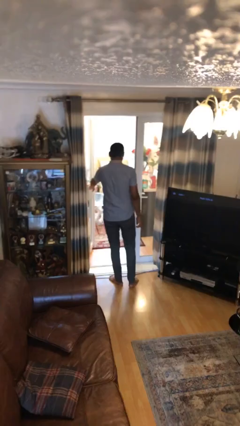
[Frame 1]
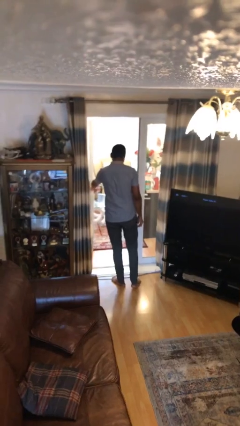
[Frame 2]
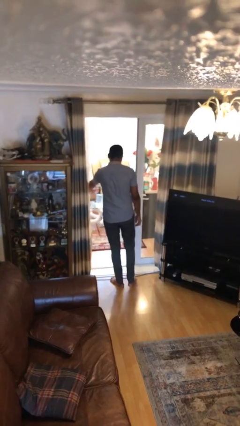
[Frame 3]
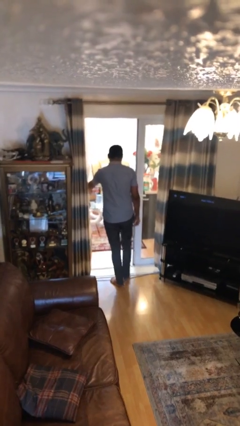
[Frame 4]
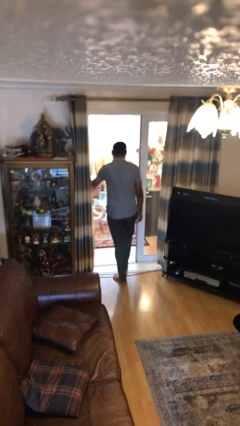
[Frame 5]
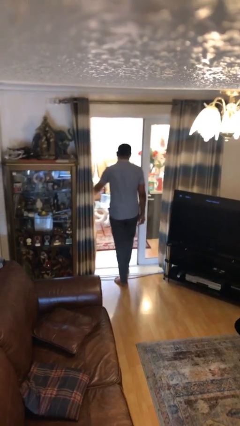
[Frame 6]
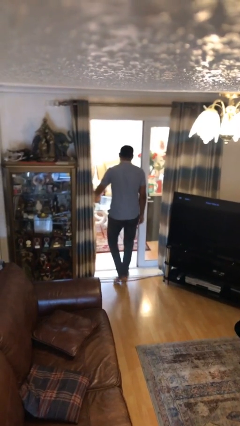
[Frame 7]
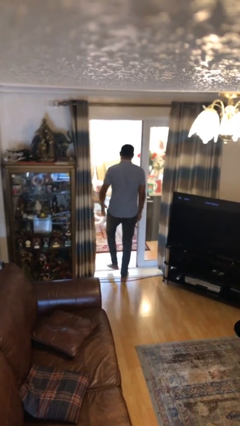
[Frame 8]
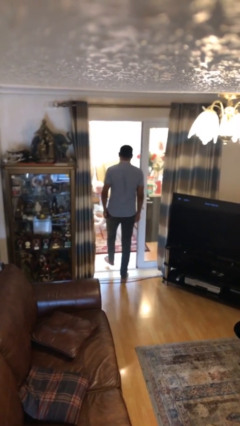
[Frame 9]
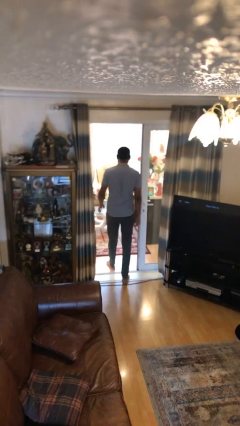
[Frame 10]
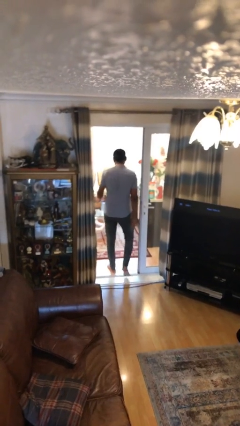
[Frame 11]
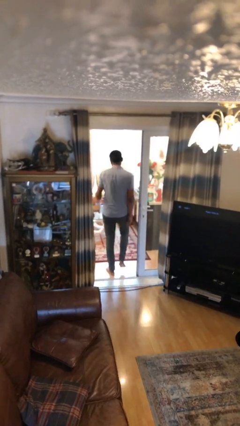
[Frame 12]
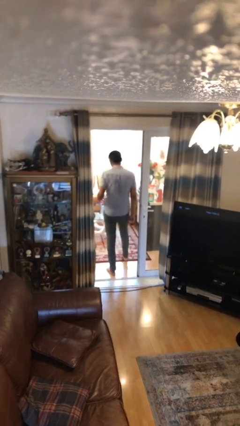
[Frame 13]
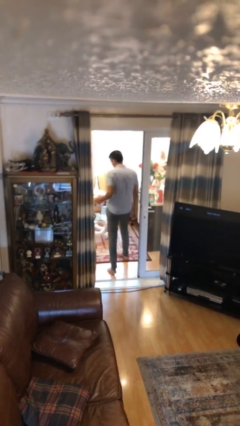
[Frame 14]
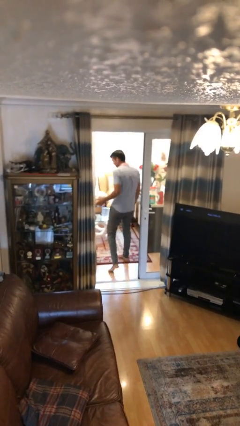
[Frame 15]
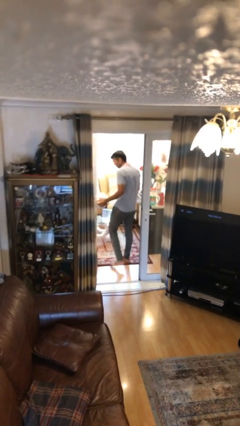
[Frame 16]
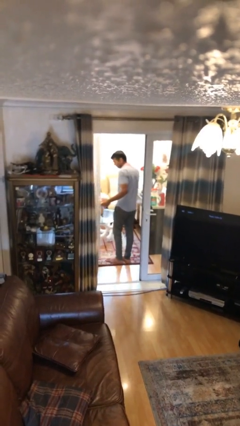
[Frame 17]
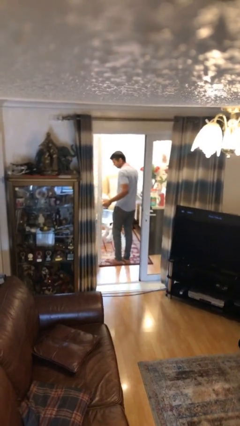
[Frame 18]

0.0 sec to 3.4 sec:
person exits scene through structure

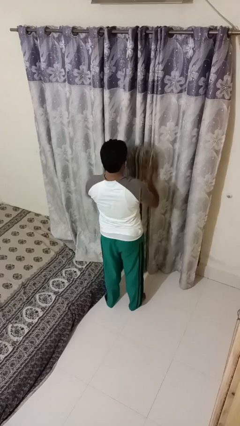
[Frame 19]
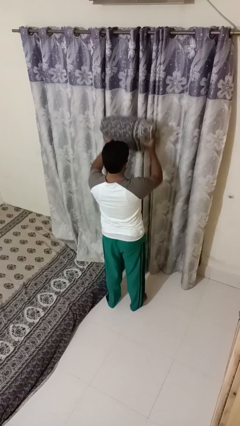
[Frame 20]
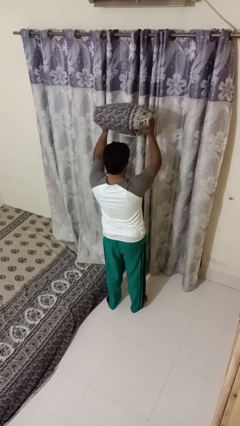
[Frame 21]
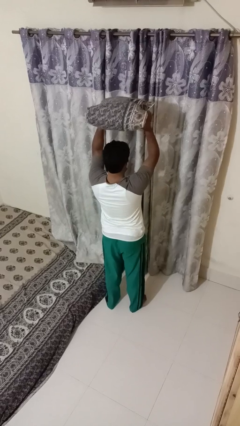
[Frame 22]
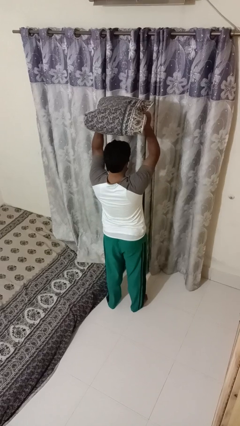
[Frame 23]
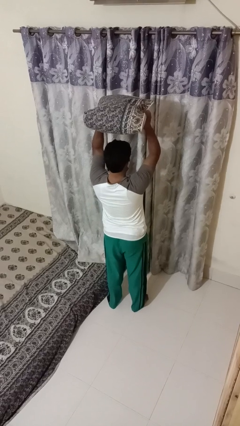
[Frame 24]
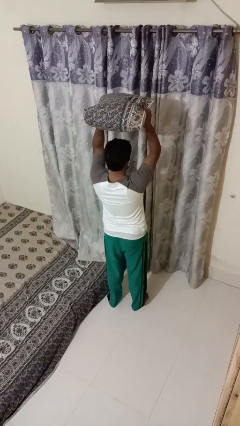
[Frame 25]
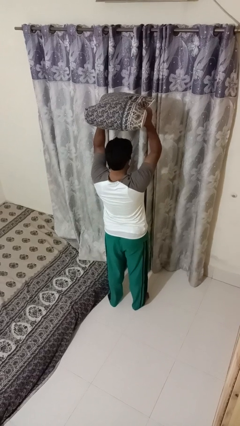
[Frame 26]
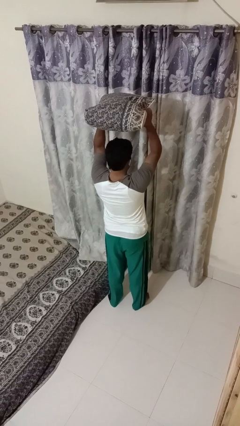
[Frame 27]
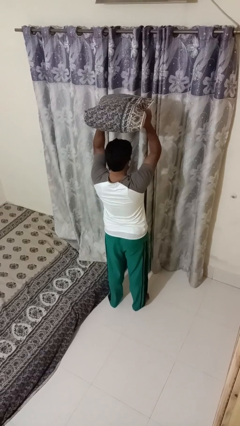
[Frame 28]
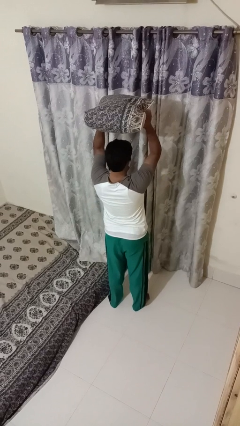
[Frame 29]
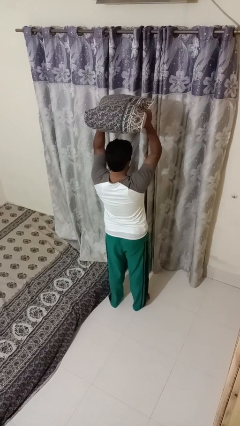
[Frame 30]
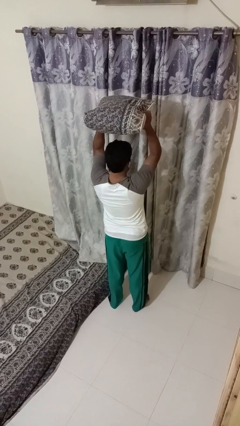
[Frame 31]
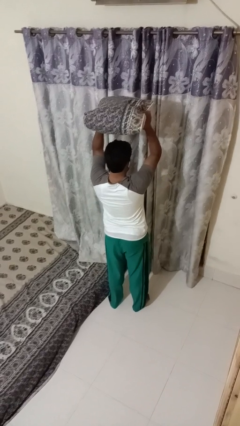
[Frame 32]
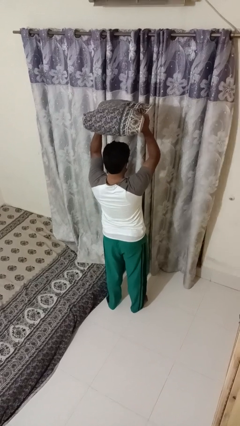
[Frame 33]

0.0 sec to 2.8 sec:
person holds object above head

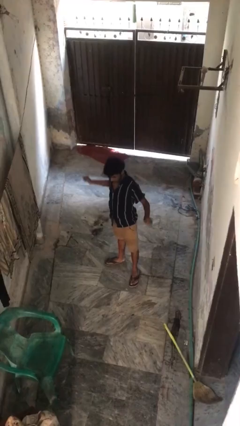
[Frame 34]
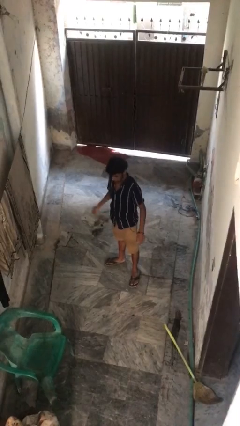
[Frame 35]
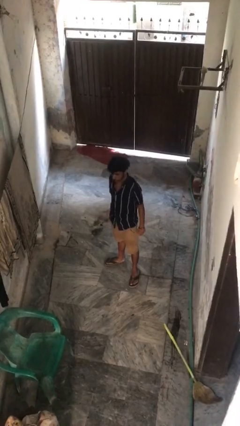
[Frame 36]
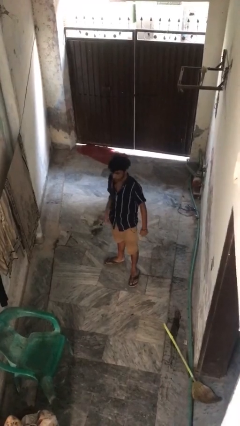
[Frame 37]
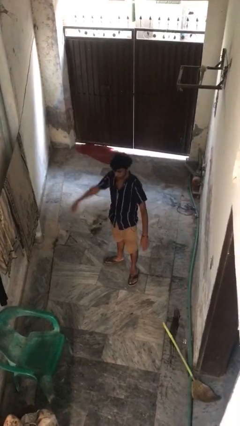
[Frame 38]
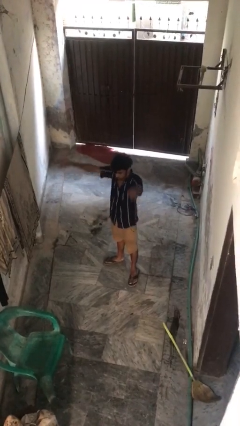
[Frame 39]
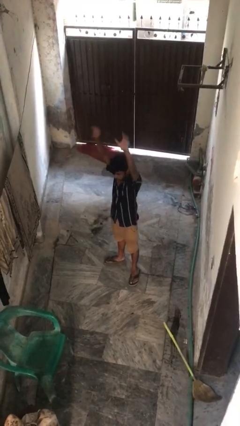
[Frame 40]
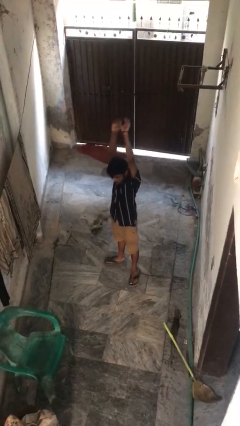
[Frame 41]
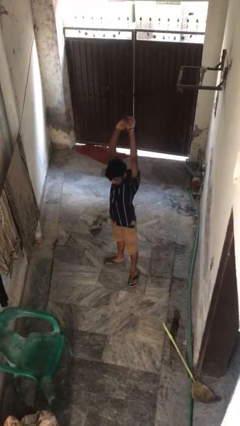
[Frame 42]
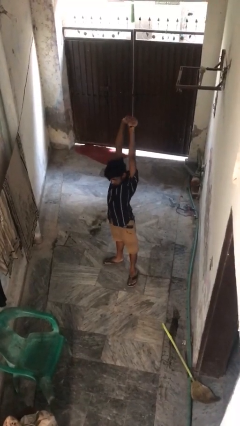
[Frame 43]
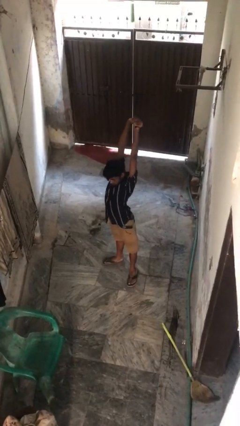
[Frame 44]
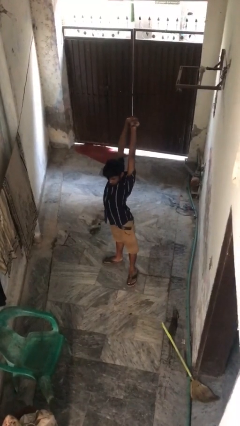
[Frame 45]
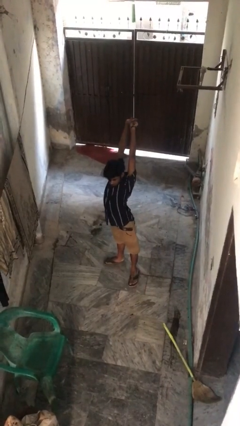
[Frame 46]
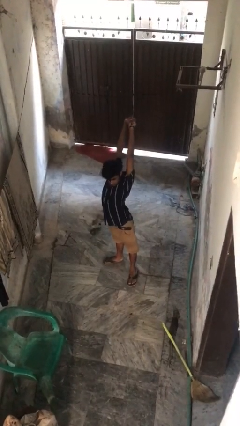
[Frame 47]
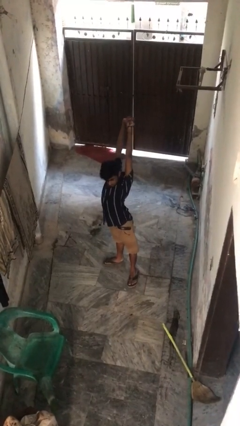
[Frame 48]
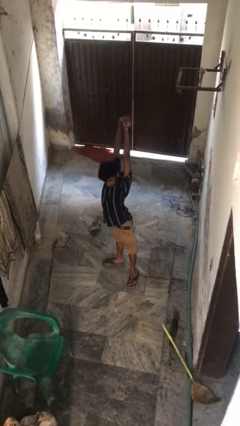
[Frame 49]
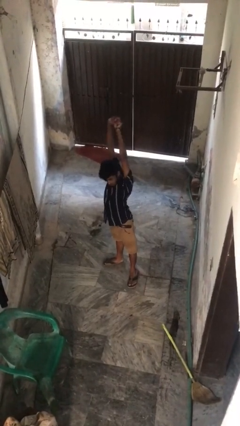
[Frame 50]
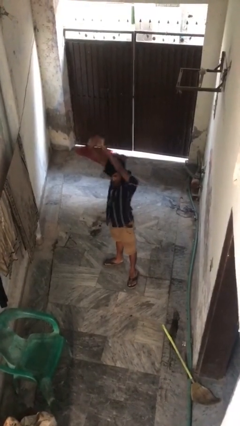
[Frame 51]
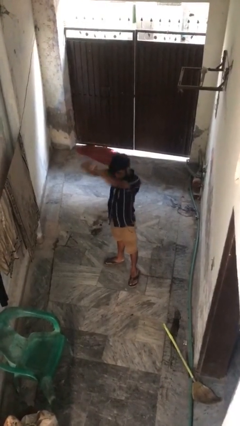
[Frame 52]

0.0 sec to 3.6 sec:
person stretches arms over head

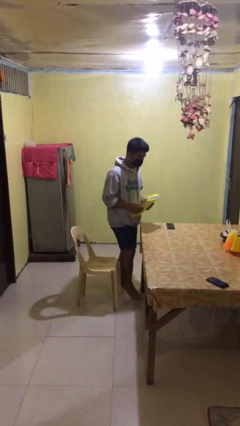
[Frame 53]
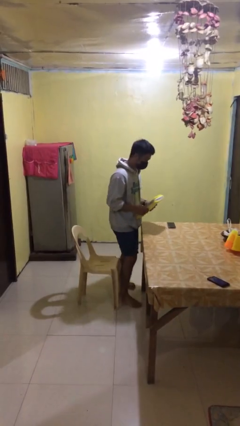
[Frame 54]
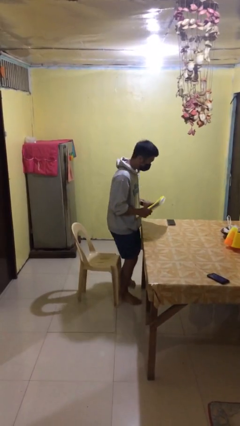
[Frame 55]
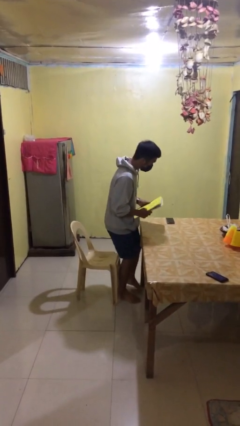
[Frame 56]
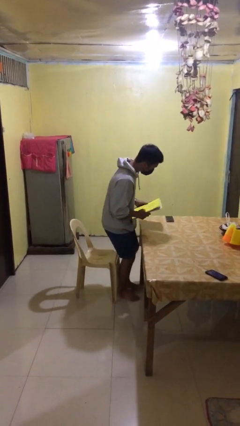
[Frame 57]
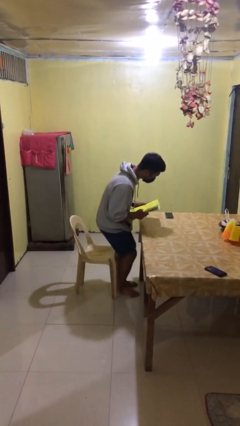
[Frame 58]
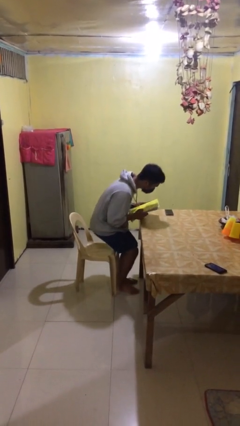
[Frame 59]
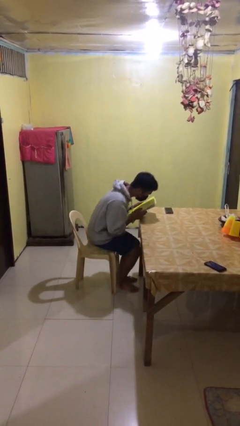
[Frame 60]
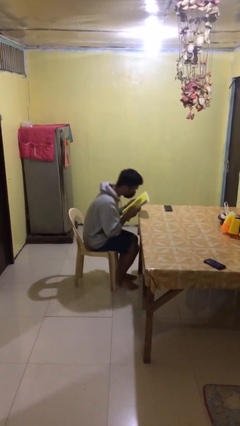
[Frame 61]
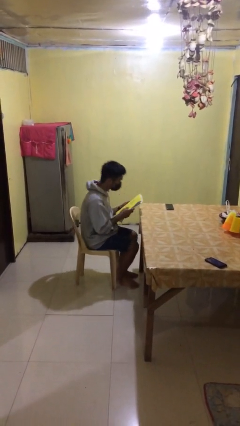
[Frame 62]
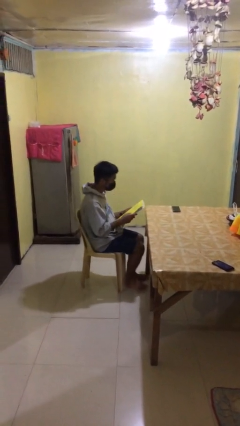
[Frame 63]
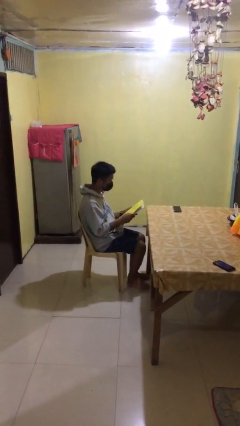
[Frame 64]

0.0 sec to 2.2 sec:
person sits down

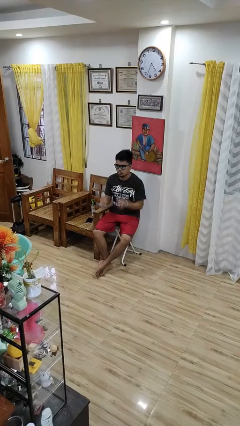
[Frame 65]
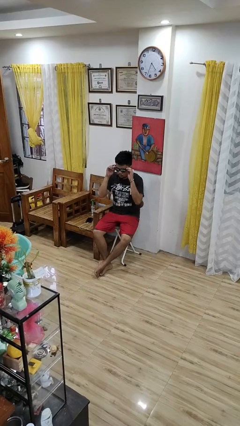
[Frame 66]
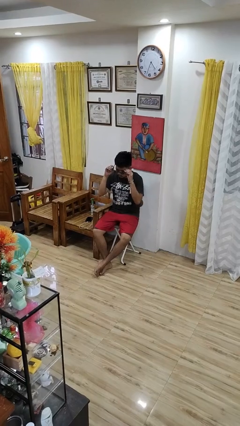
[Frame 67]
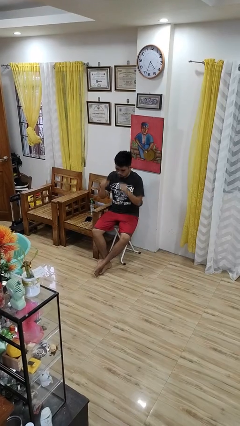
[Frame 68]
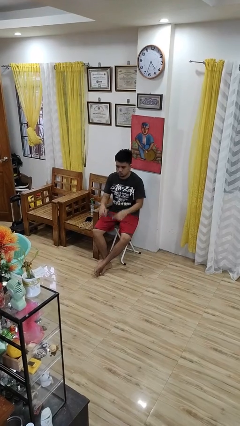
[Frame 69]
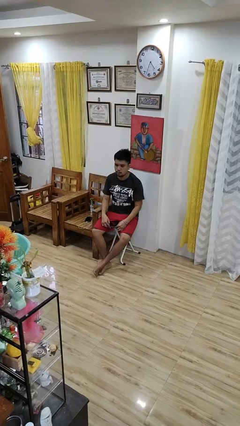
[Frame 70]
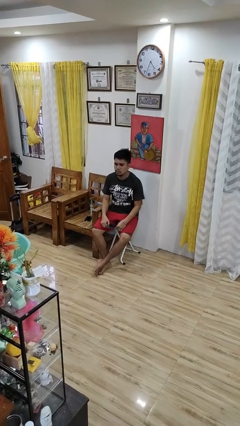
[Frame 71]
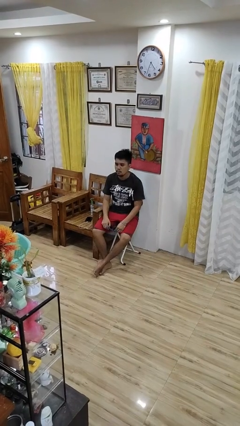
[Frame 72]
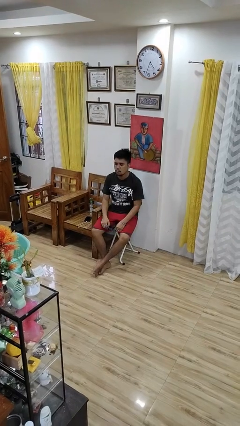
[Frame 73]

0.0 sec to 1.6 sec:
person takes off sunglasses

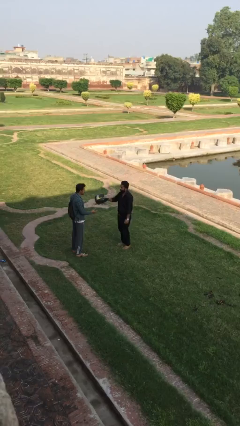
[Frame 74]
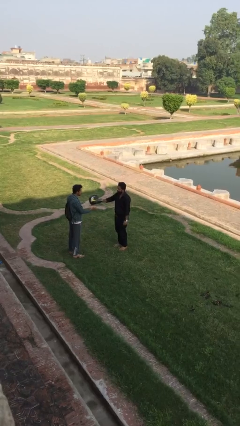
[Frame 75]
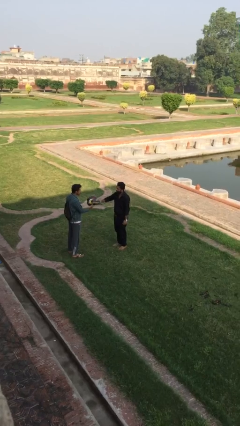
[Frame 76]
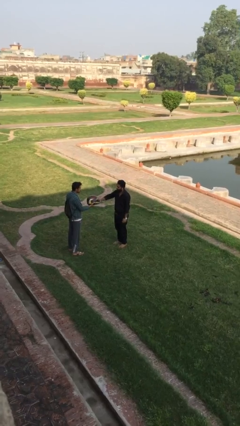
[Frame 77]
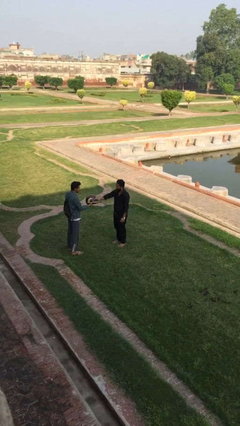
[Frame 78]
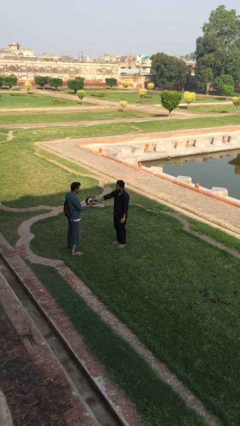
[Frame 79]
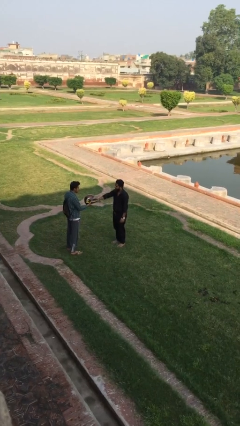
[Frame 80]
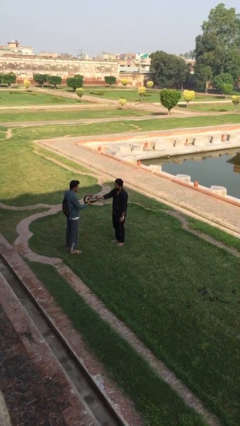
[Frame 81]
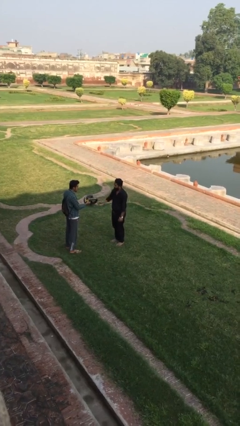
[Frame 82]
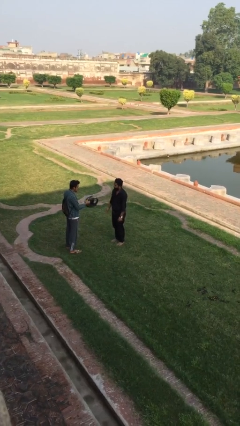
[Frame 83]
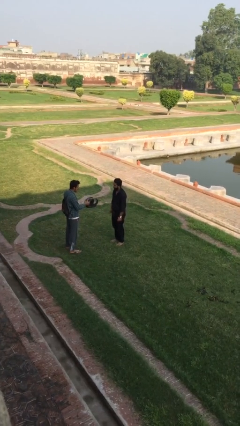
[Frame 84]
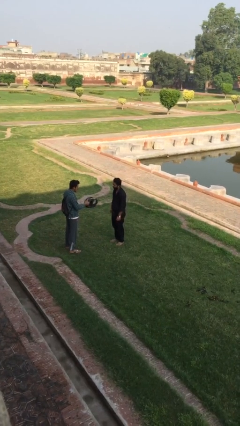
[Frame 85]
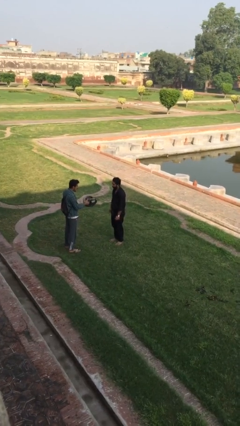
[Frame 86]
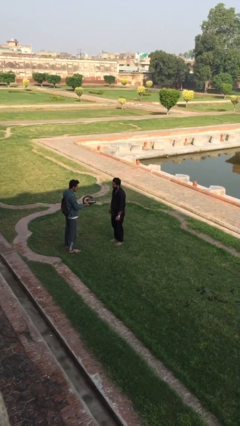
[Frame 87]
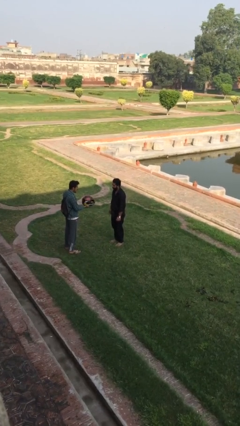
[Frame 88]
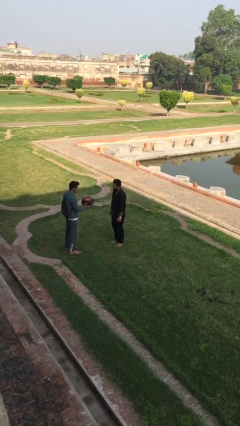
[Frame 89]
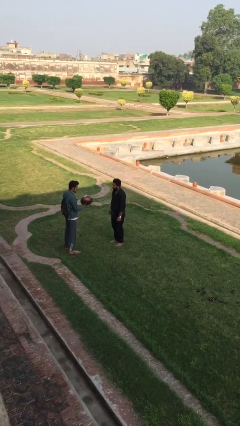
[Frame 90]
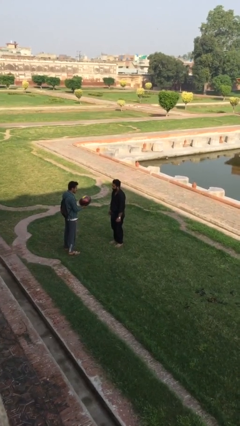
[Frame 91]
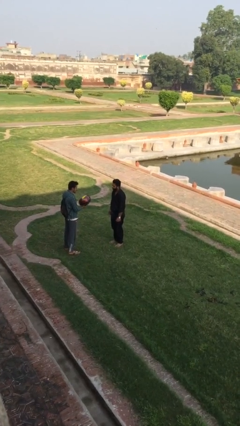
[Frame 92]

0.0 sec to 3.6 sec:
person transfers object to person

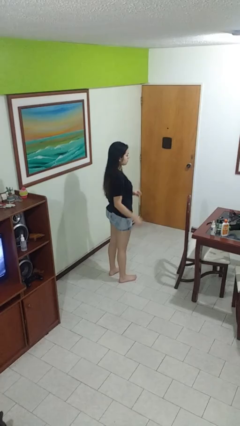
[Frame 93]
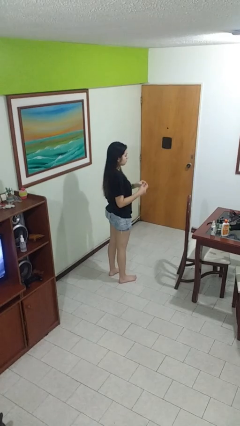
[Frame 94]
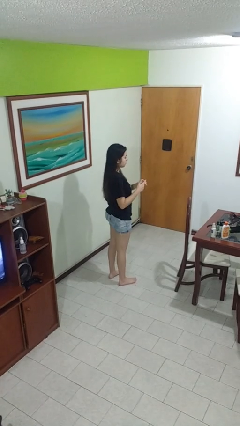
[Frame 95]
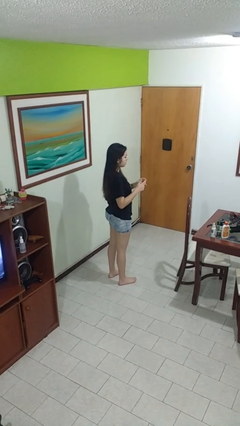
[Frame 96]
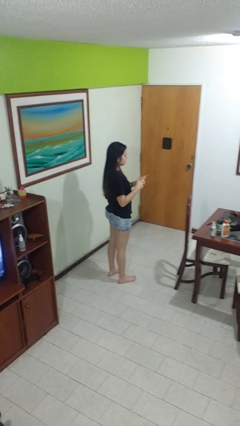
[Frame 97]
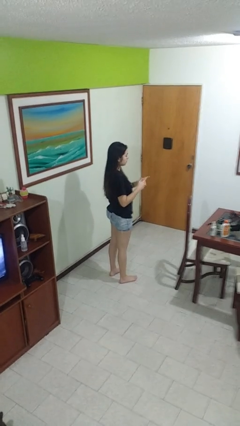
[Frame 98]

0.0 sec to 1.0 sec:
person puts on ring
